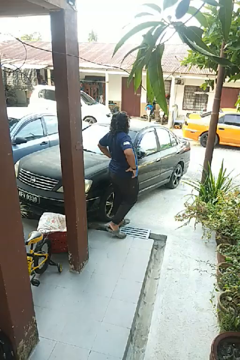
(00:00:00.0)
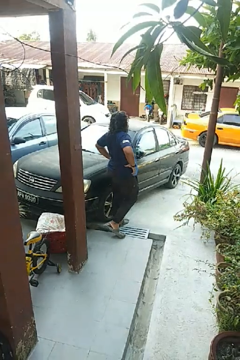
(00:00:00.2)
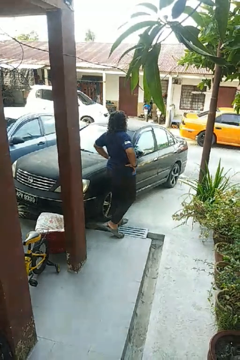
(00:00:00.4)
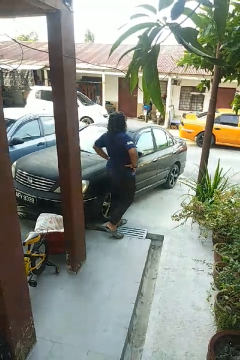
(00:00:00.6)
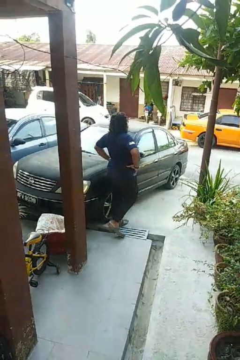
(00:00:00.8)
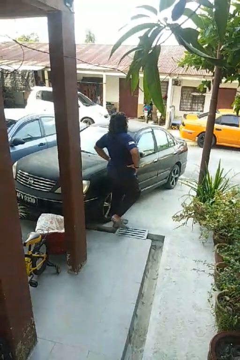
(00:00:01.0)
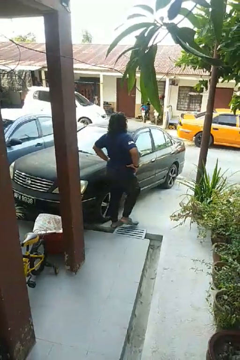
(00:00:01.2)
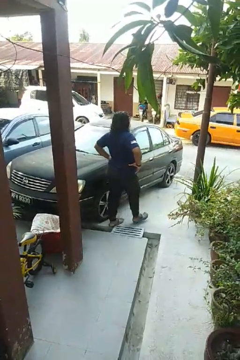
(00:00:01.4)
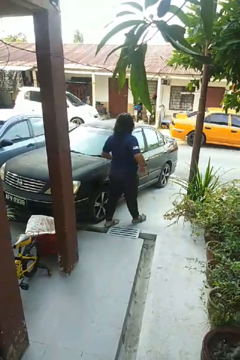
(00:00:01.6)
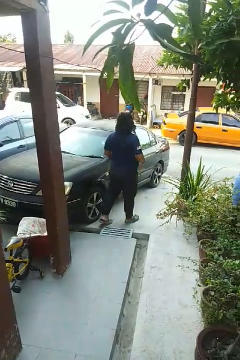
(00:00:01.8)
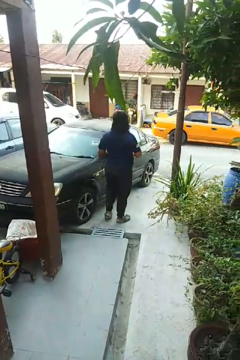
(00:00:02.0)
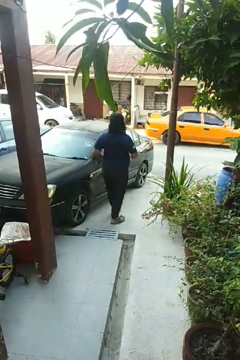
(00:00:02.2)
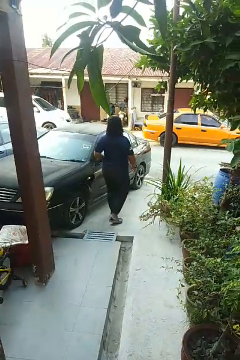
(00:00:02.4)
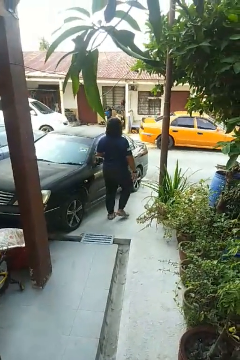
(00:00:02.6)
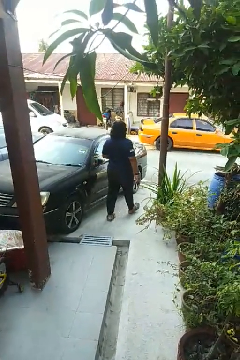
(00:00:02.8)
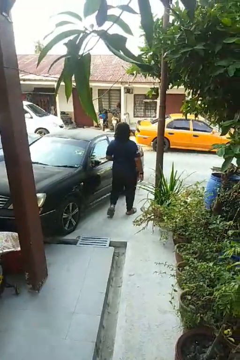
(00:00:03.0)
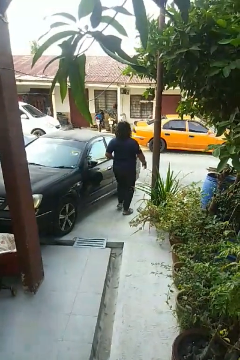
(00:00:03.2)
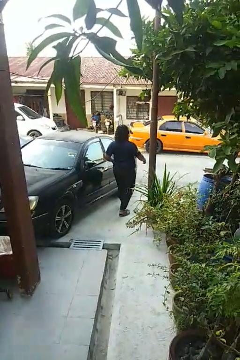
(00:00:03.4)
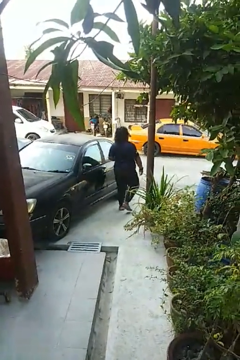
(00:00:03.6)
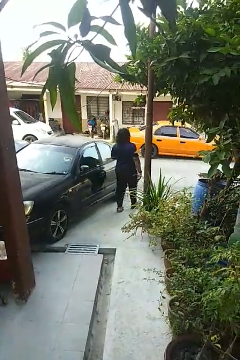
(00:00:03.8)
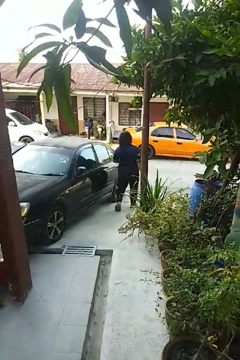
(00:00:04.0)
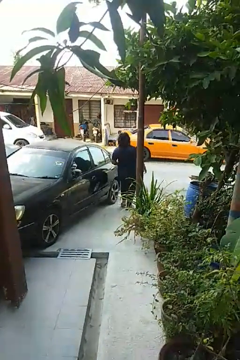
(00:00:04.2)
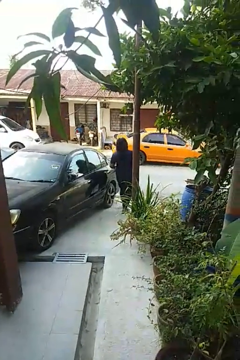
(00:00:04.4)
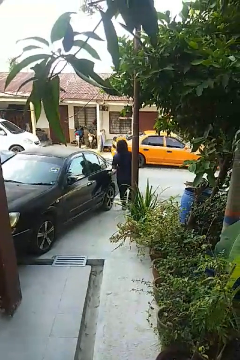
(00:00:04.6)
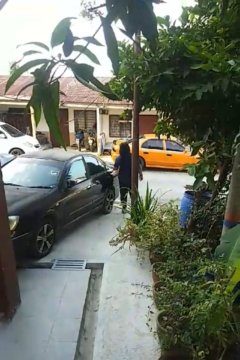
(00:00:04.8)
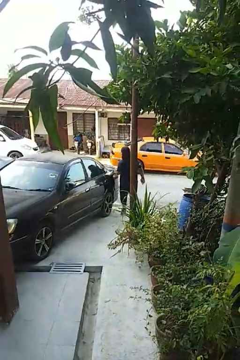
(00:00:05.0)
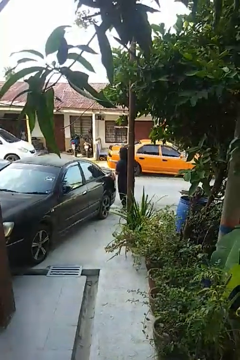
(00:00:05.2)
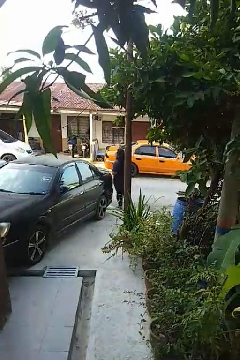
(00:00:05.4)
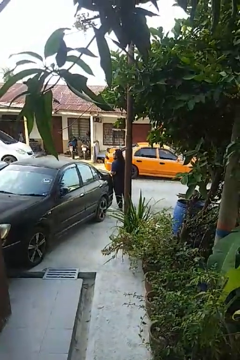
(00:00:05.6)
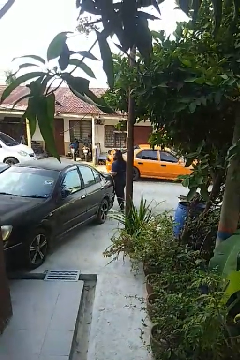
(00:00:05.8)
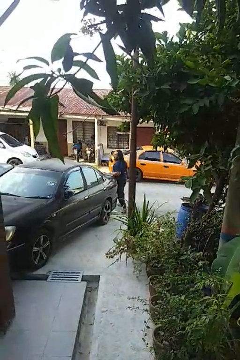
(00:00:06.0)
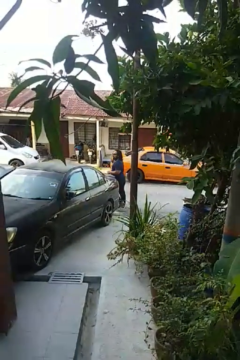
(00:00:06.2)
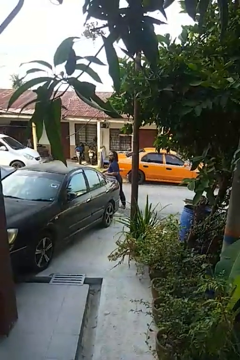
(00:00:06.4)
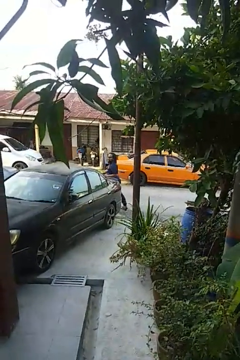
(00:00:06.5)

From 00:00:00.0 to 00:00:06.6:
person walks around car

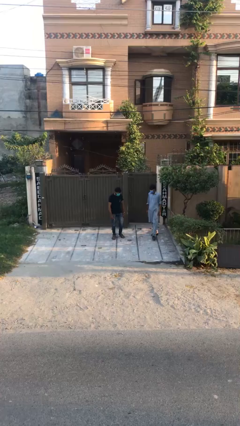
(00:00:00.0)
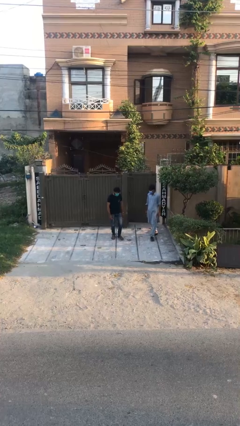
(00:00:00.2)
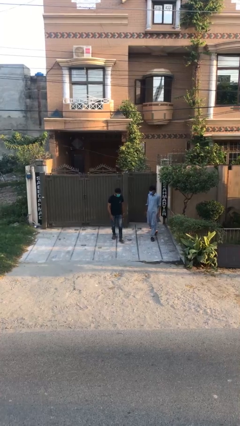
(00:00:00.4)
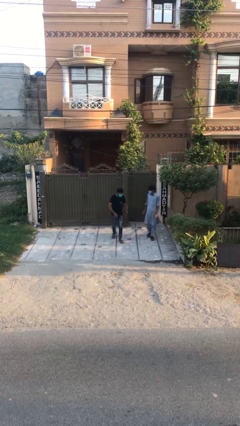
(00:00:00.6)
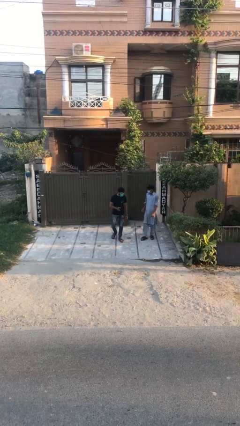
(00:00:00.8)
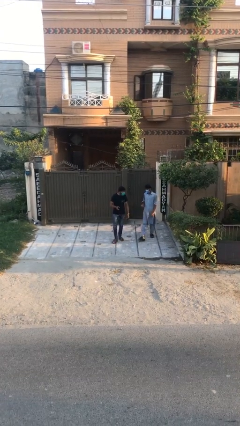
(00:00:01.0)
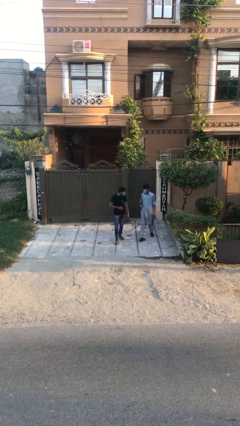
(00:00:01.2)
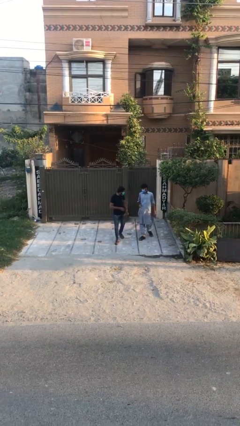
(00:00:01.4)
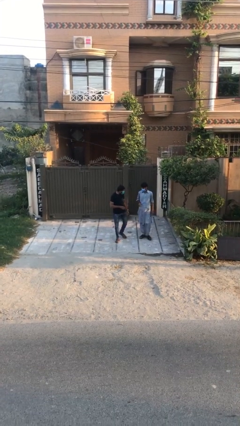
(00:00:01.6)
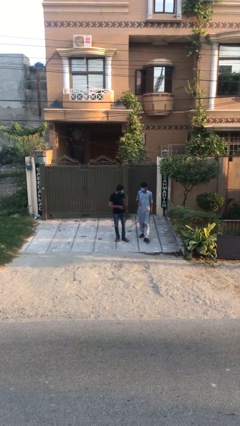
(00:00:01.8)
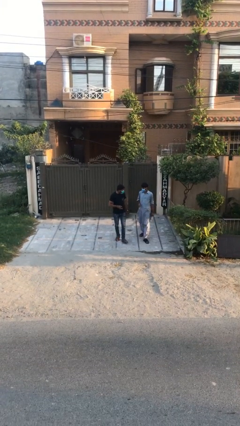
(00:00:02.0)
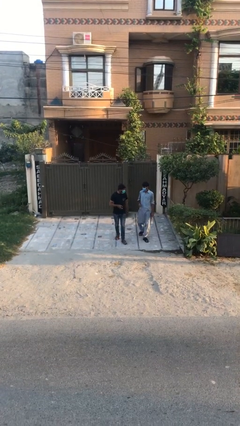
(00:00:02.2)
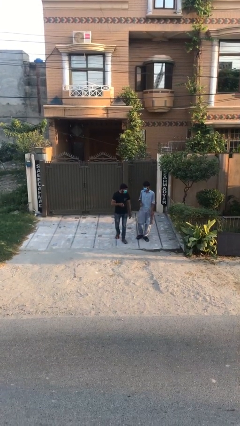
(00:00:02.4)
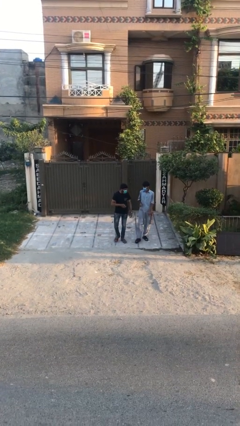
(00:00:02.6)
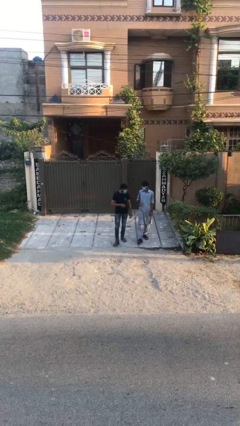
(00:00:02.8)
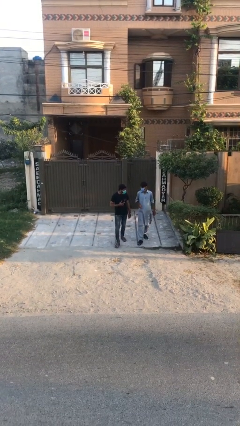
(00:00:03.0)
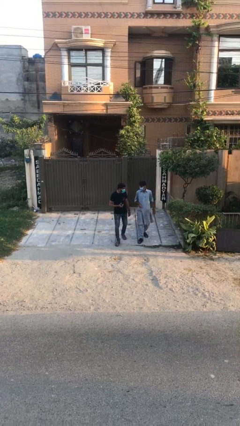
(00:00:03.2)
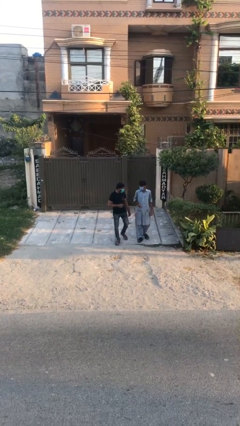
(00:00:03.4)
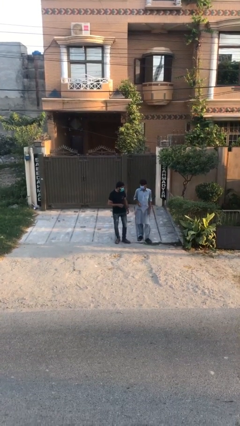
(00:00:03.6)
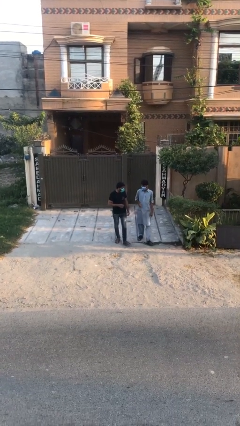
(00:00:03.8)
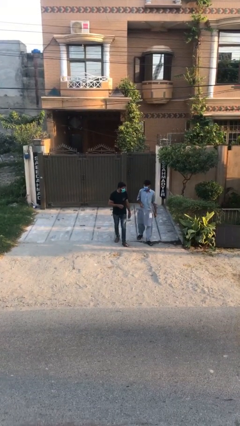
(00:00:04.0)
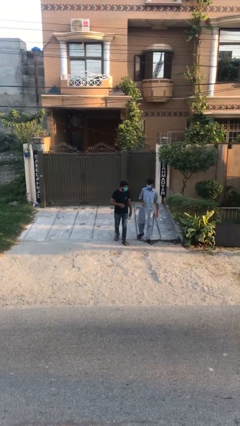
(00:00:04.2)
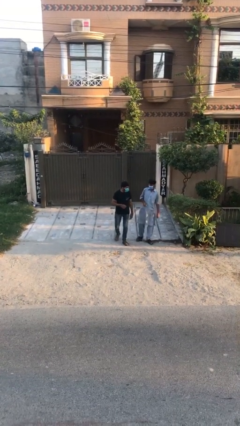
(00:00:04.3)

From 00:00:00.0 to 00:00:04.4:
person talks to person

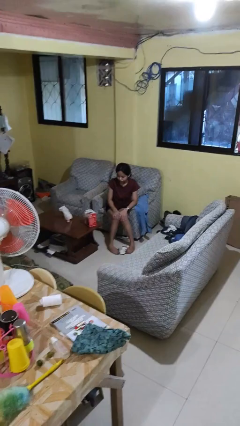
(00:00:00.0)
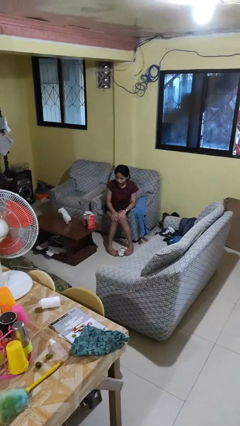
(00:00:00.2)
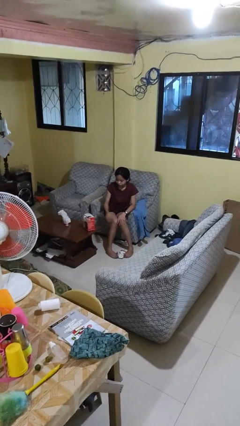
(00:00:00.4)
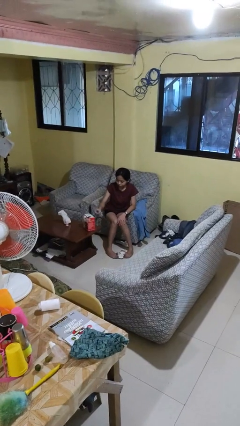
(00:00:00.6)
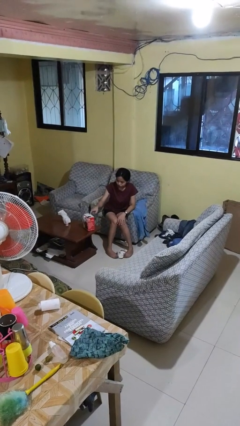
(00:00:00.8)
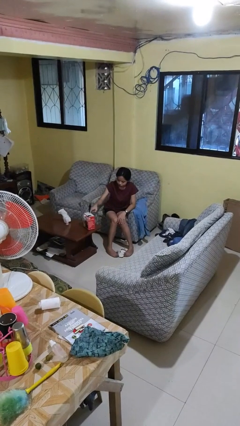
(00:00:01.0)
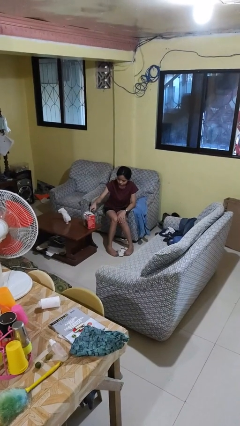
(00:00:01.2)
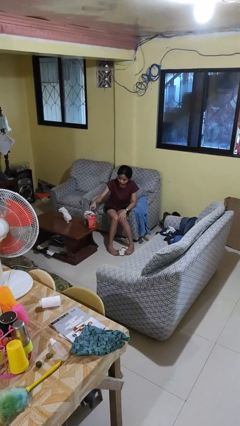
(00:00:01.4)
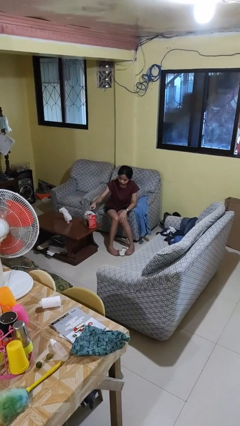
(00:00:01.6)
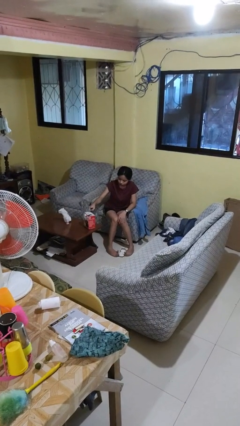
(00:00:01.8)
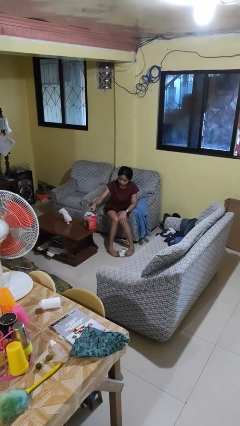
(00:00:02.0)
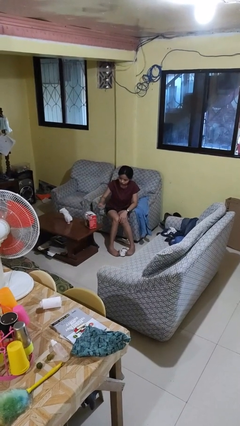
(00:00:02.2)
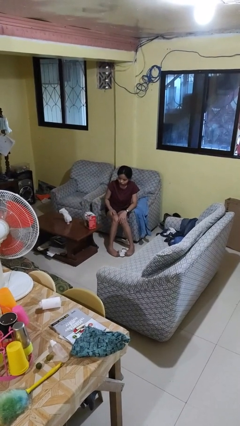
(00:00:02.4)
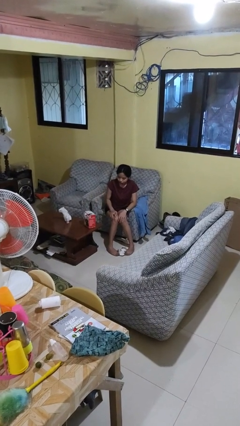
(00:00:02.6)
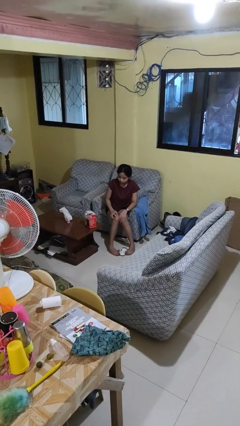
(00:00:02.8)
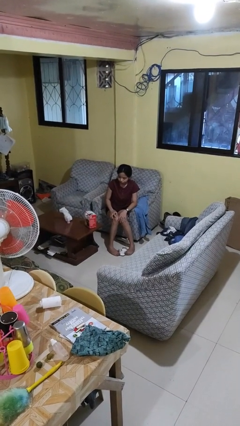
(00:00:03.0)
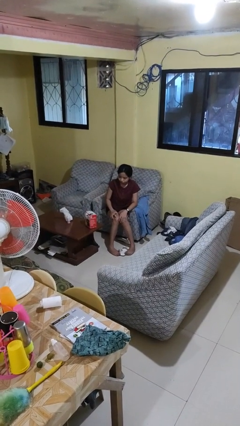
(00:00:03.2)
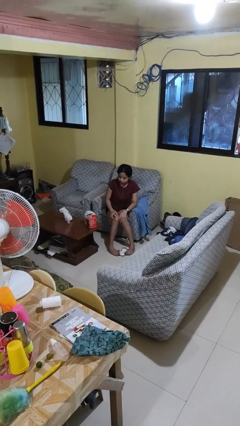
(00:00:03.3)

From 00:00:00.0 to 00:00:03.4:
person taps object with finger

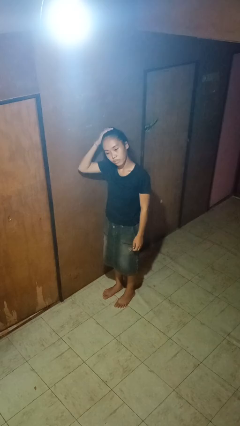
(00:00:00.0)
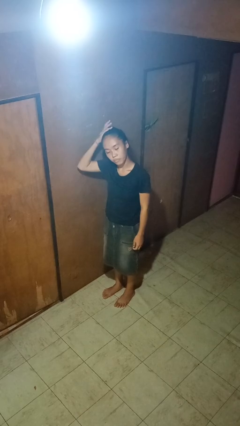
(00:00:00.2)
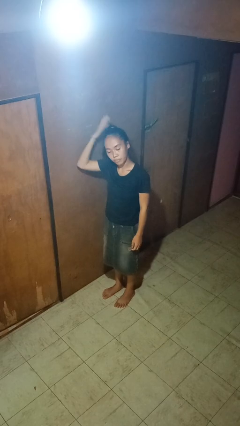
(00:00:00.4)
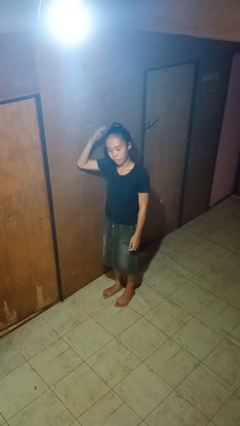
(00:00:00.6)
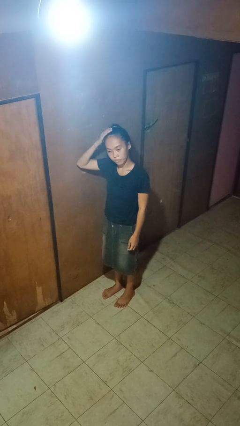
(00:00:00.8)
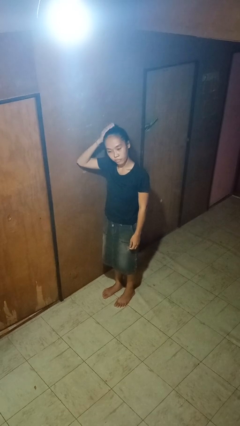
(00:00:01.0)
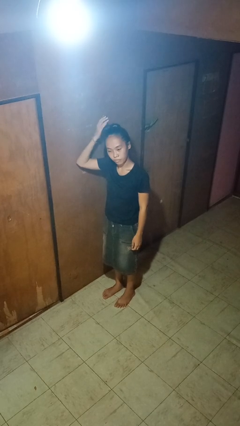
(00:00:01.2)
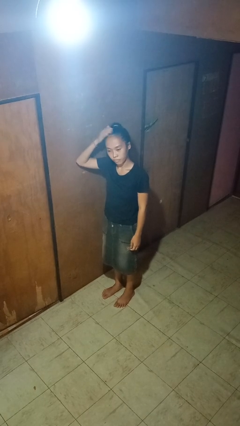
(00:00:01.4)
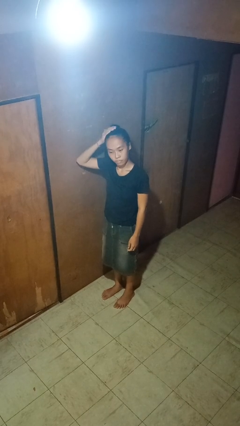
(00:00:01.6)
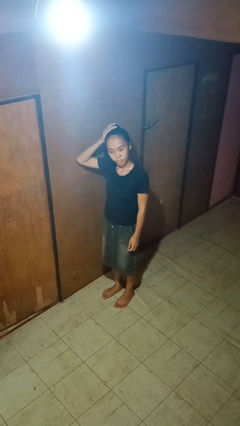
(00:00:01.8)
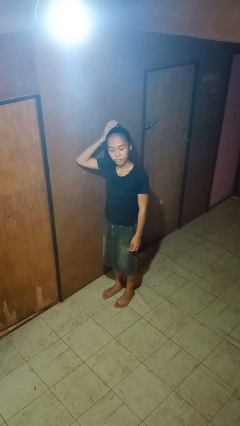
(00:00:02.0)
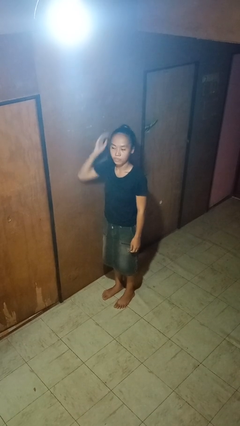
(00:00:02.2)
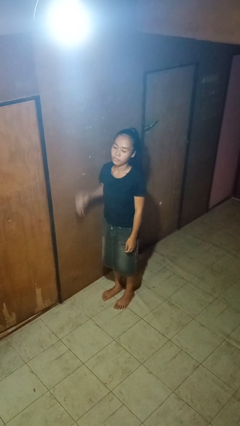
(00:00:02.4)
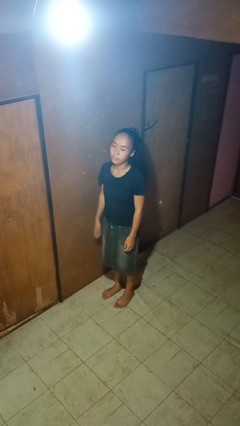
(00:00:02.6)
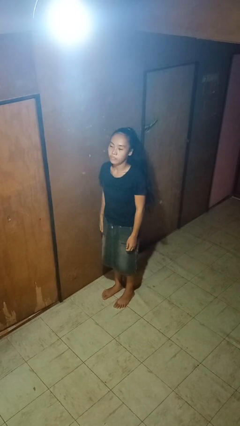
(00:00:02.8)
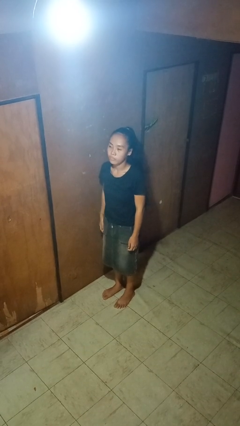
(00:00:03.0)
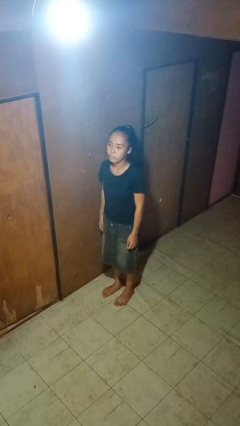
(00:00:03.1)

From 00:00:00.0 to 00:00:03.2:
person strokes hair

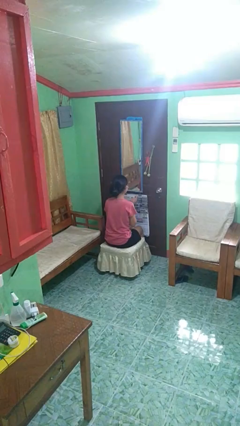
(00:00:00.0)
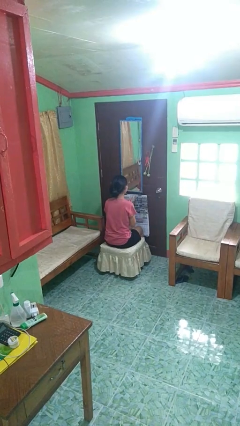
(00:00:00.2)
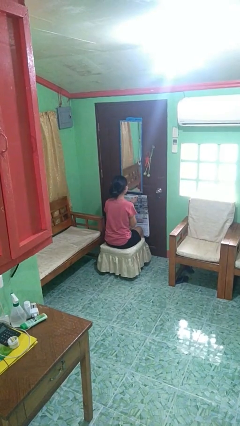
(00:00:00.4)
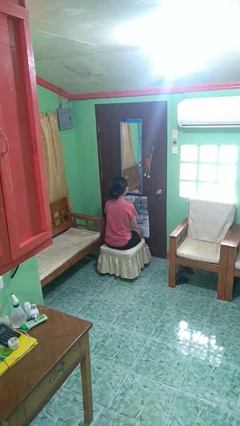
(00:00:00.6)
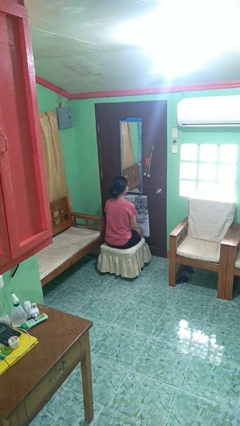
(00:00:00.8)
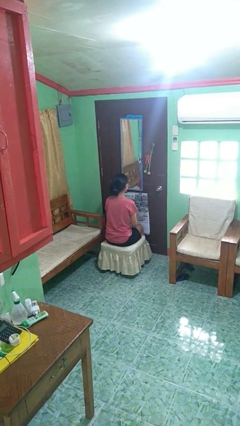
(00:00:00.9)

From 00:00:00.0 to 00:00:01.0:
person claps hands
